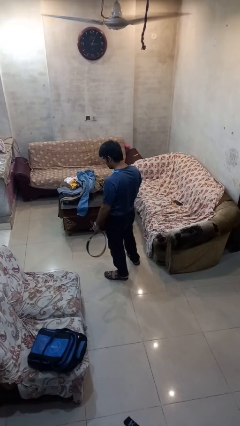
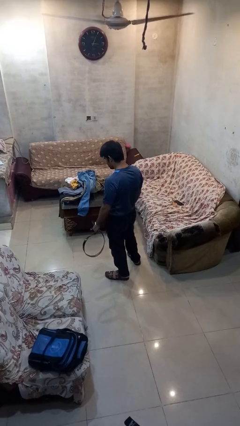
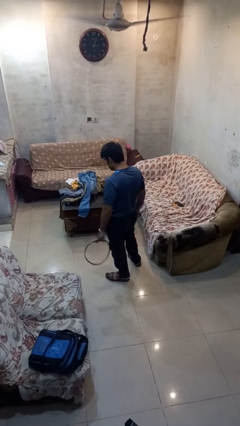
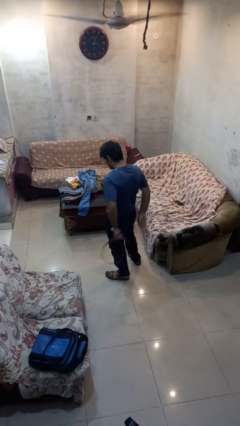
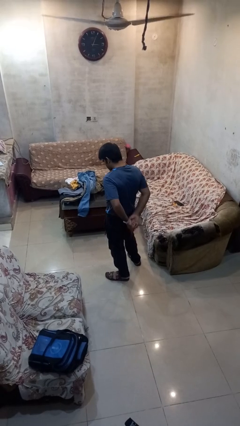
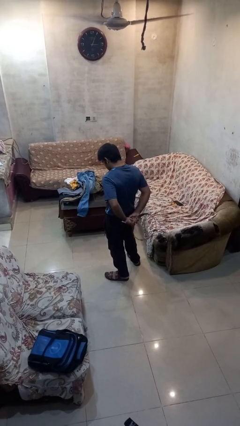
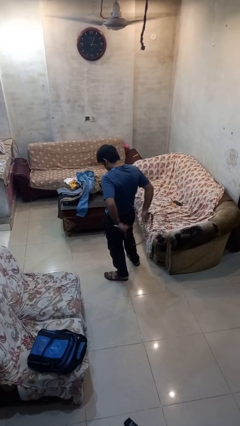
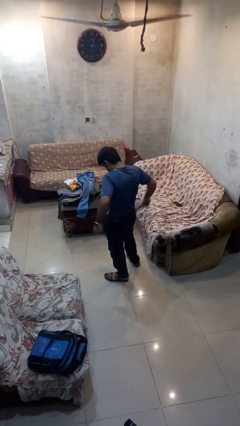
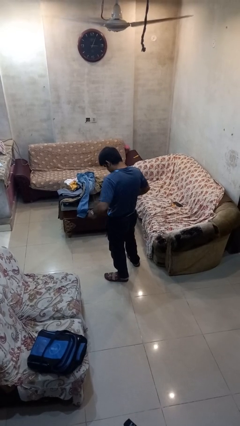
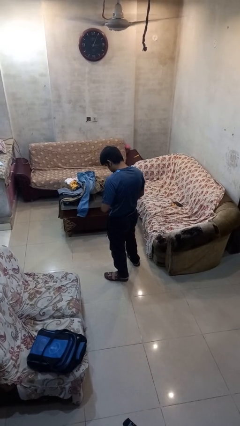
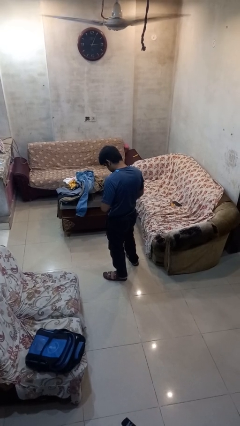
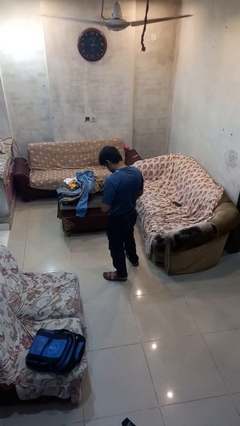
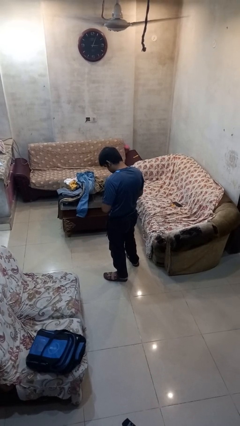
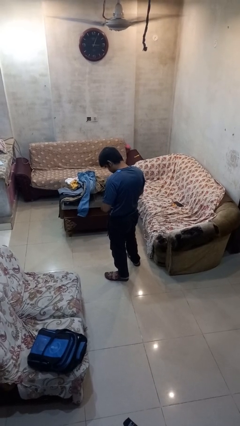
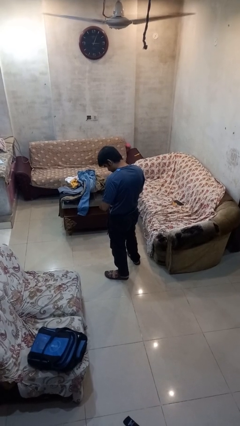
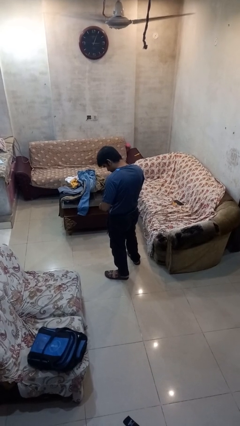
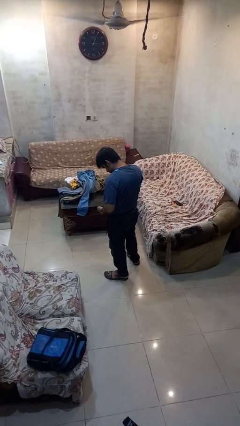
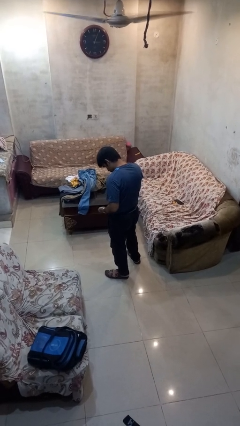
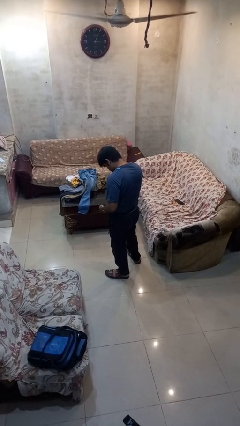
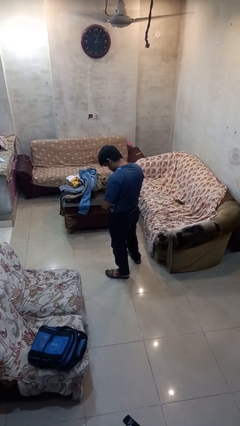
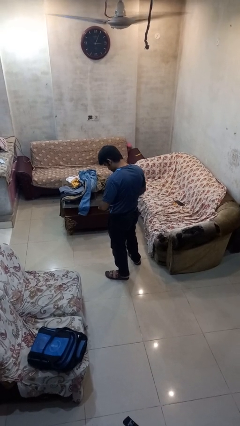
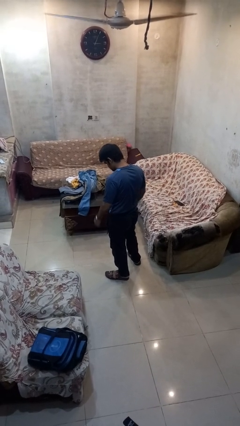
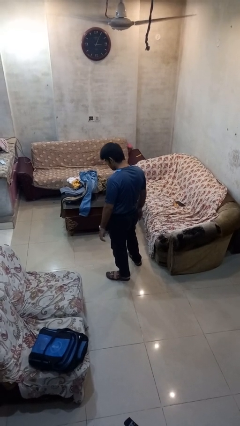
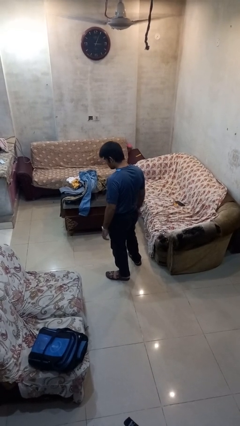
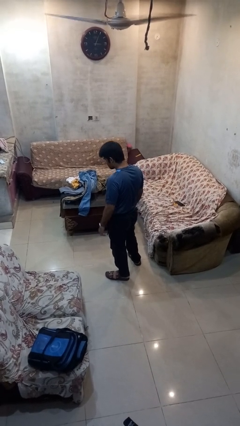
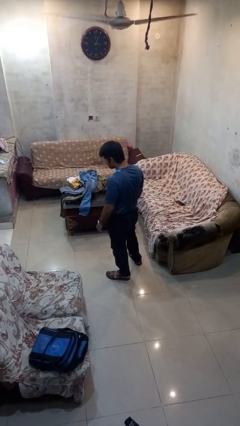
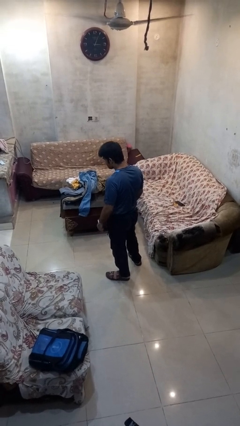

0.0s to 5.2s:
person puts on belt

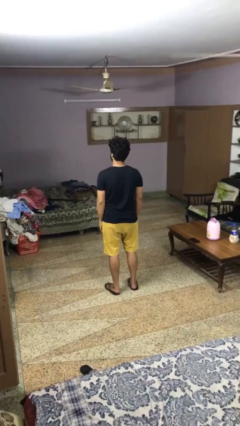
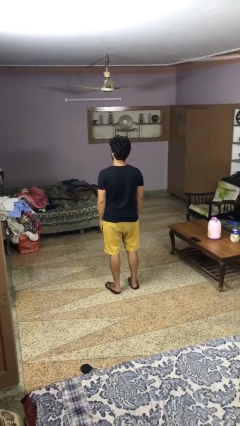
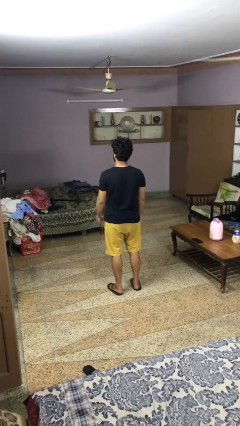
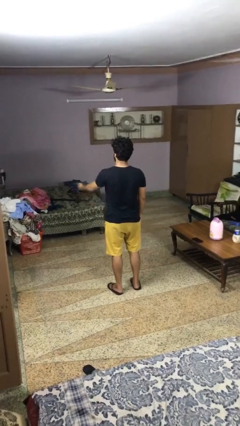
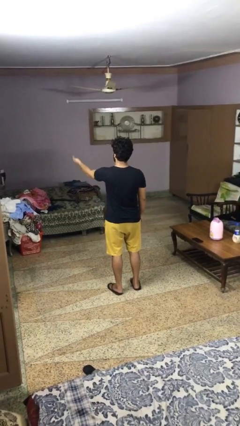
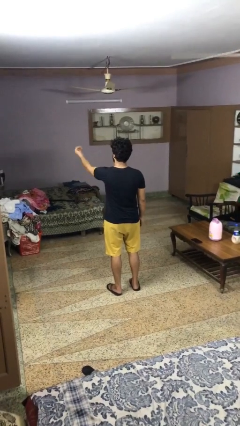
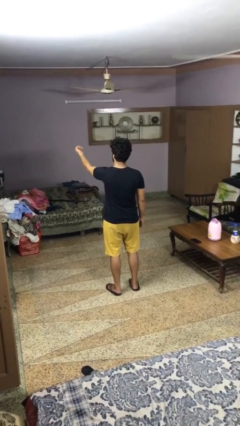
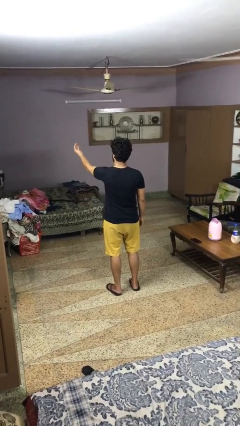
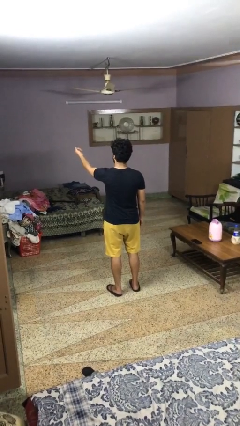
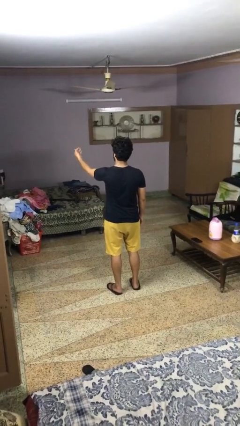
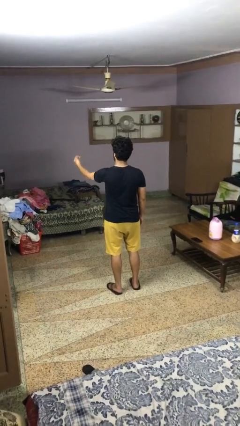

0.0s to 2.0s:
person gestures come here

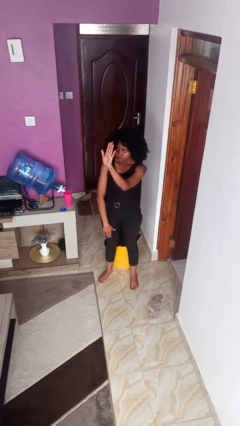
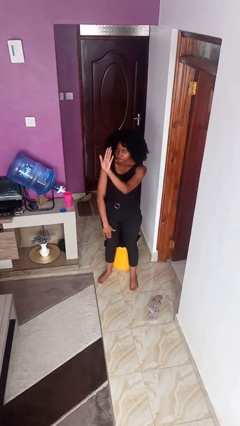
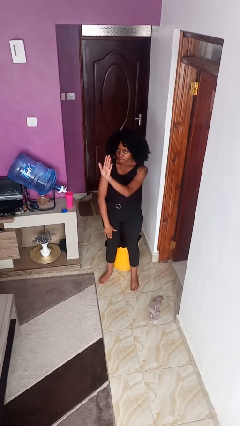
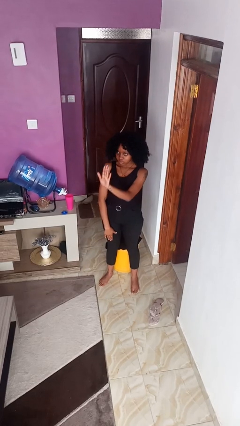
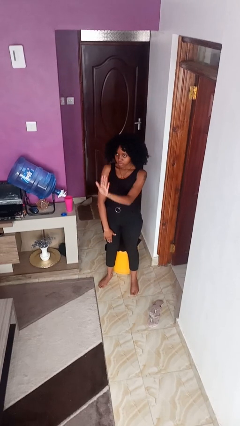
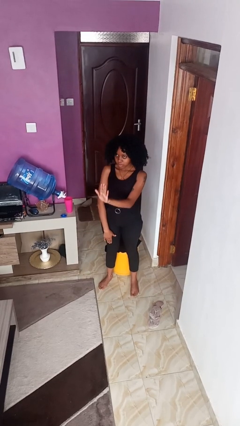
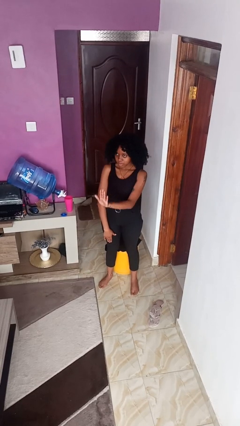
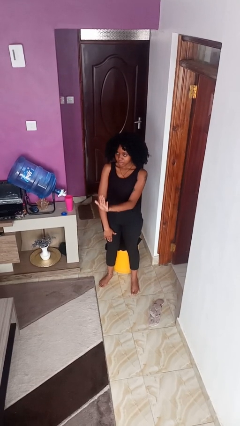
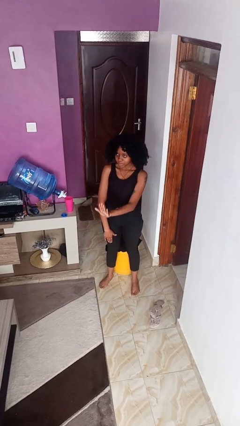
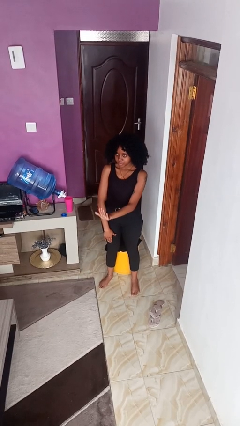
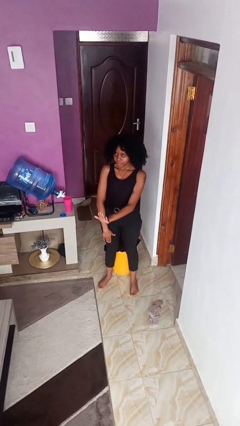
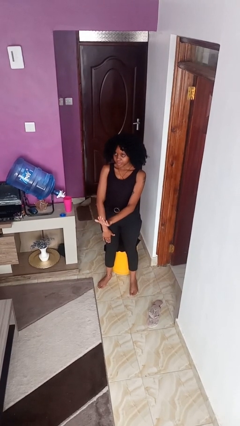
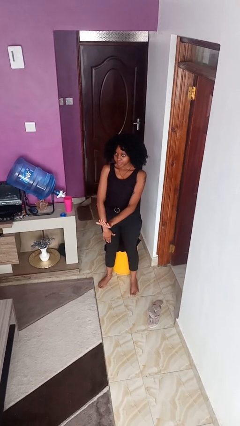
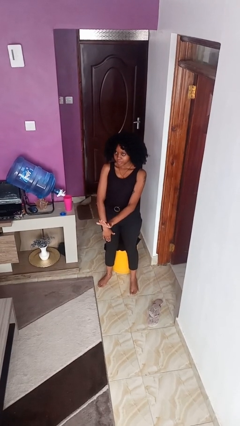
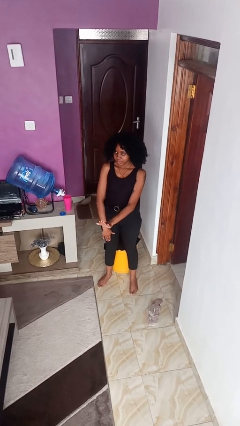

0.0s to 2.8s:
person gestures swipe down

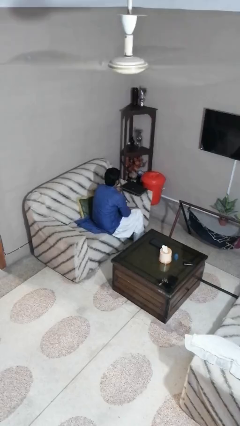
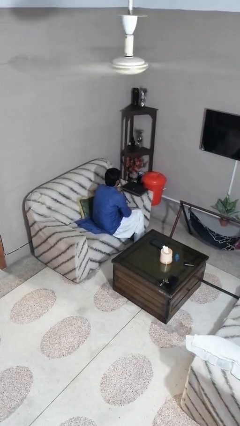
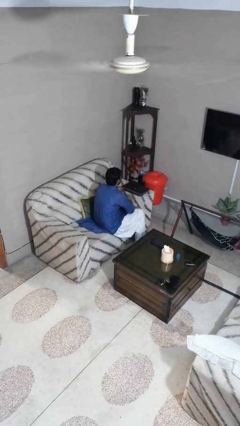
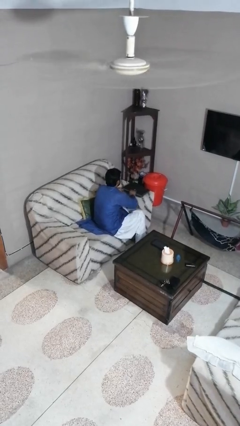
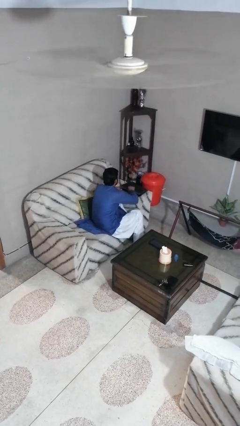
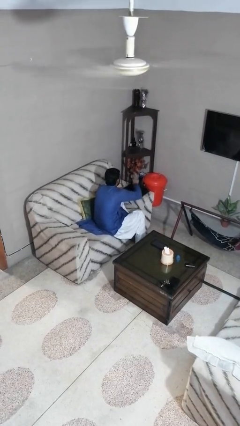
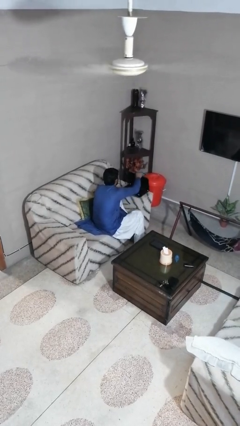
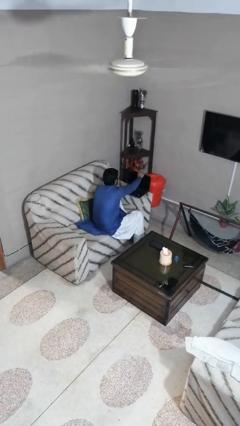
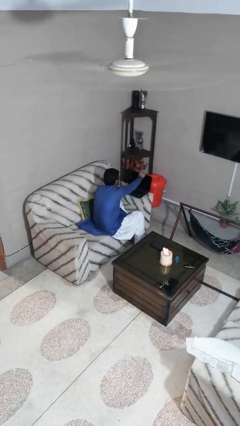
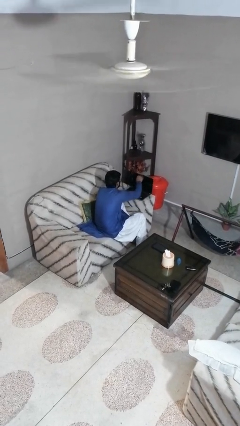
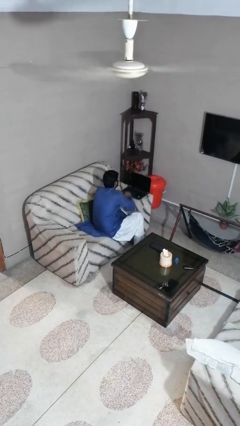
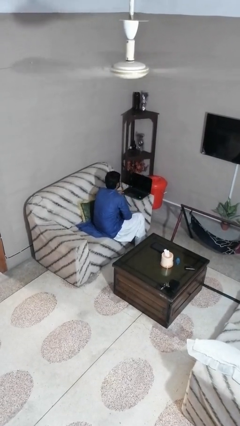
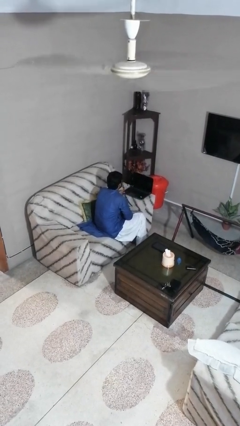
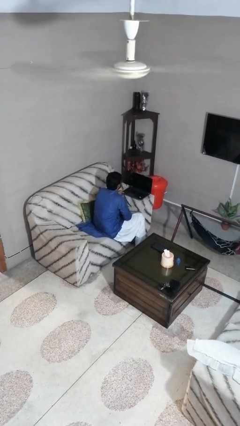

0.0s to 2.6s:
person opens laptop

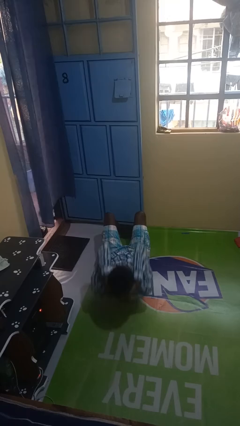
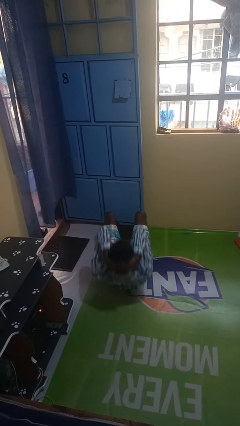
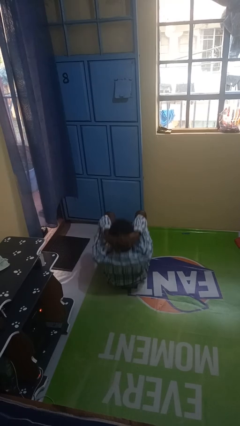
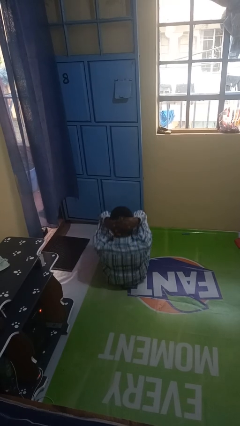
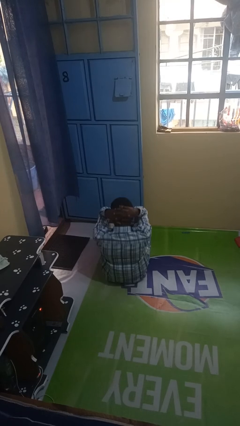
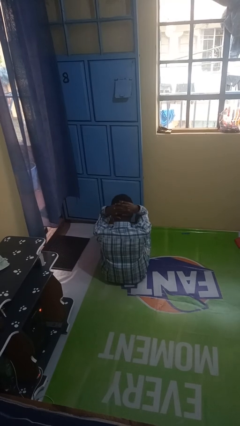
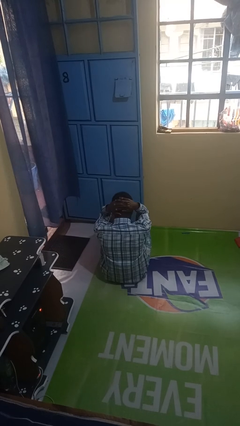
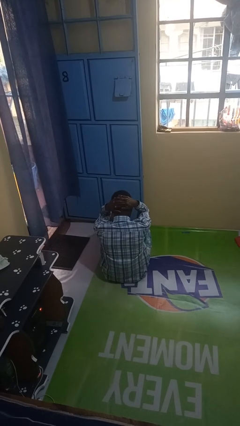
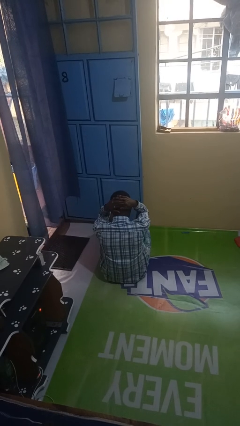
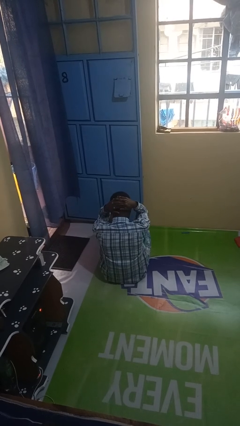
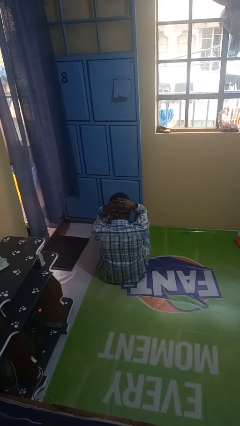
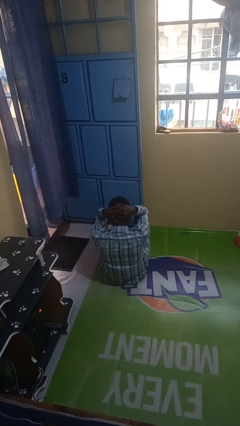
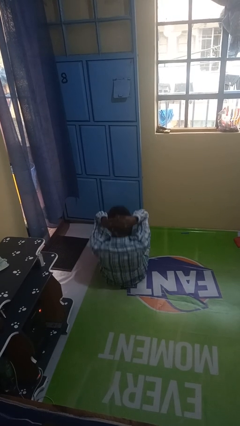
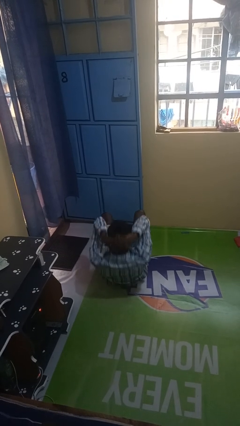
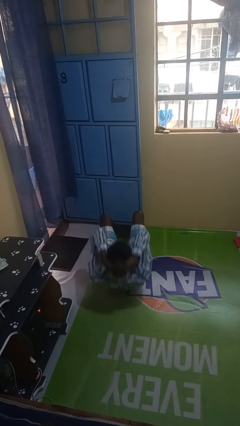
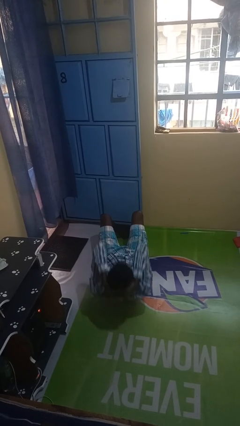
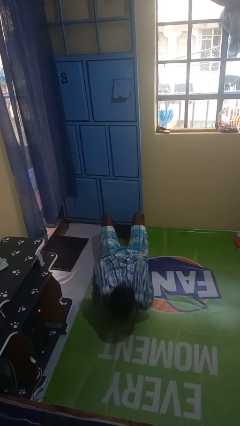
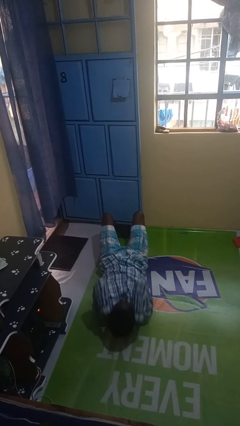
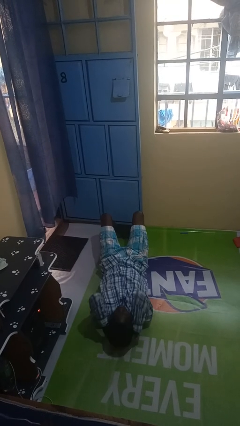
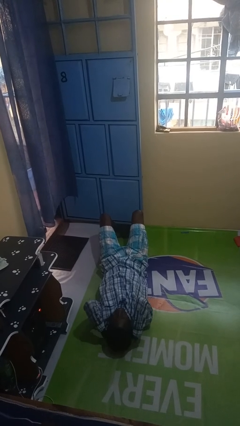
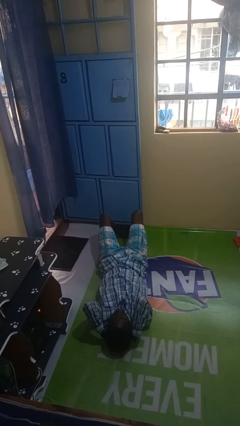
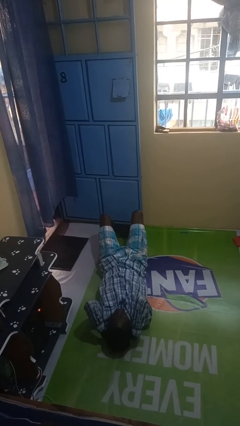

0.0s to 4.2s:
person exercises with situp

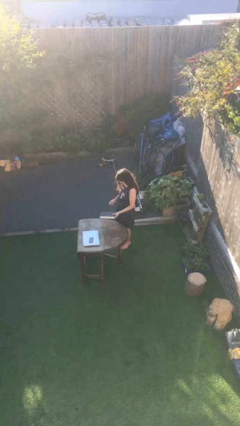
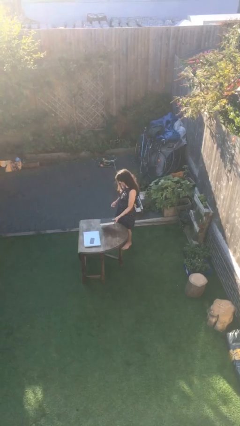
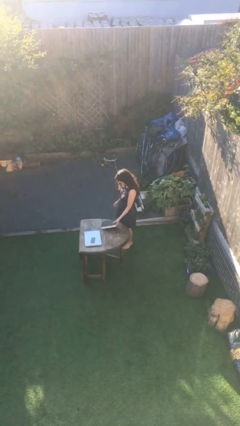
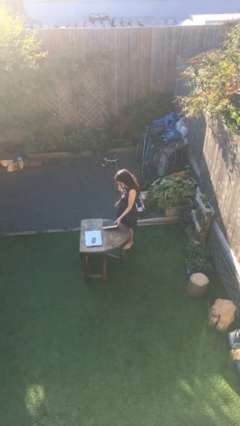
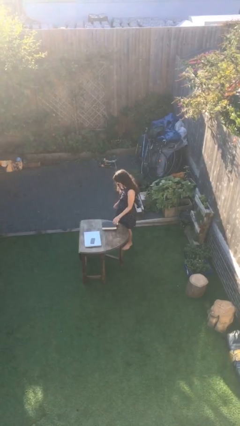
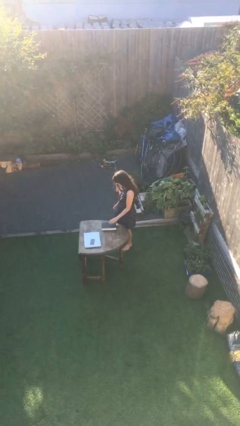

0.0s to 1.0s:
person puts down object on table
